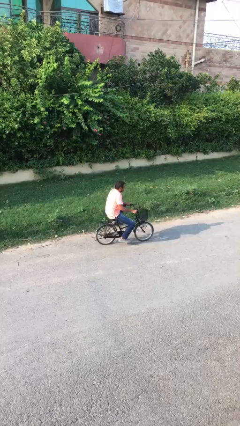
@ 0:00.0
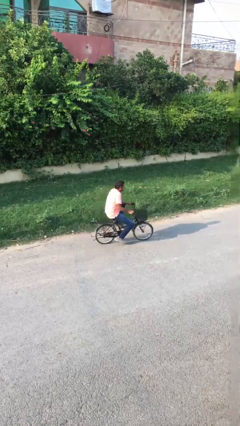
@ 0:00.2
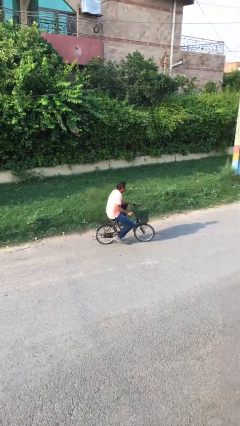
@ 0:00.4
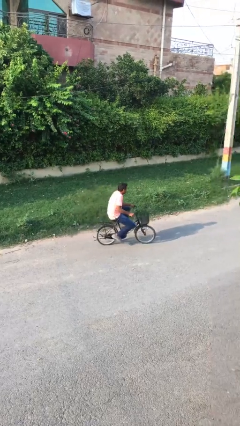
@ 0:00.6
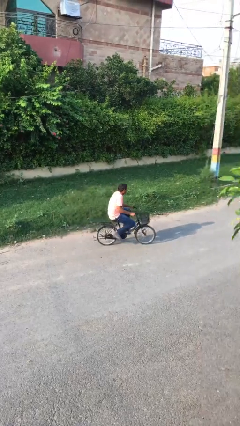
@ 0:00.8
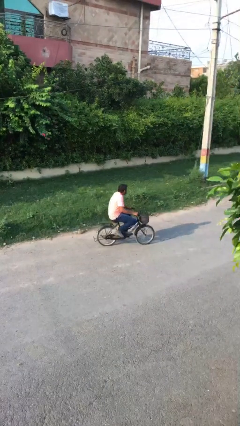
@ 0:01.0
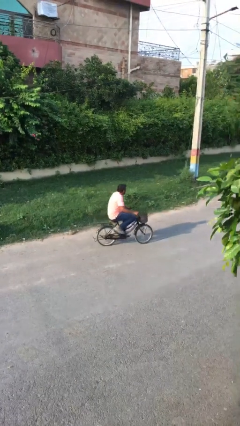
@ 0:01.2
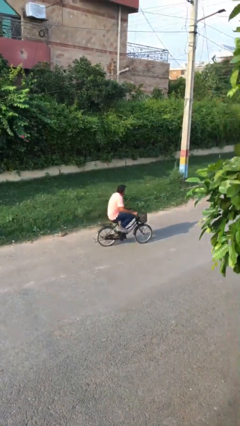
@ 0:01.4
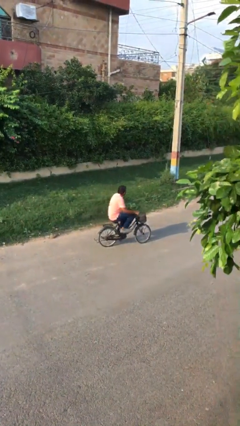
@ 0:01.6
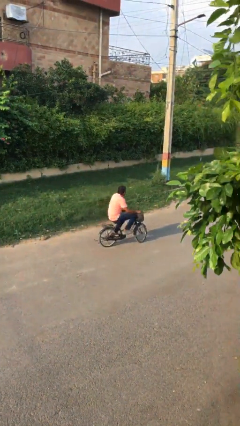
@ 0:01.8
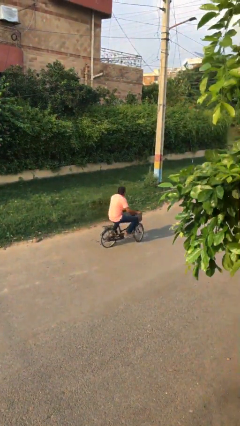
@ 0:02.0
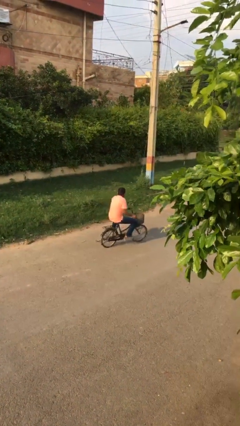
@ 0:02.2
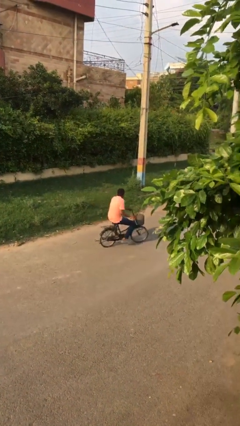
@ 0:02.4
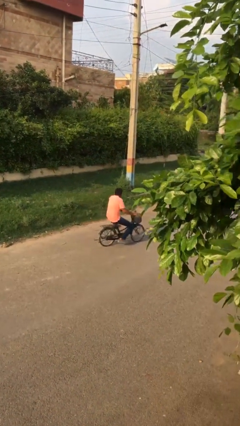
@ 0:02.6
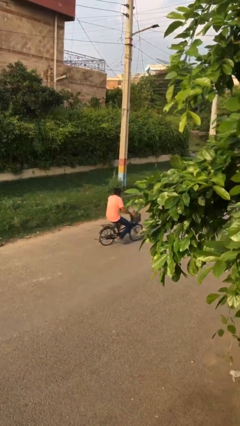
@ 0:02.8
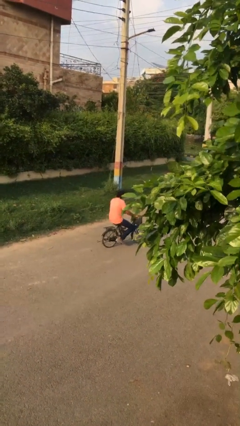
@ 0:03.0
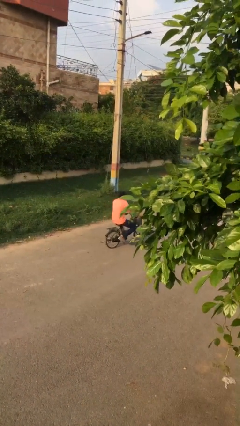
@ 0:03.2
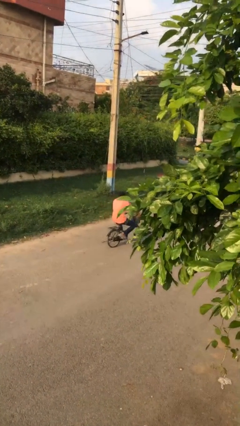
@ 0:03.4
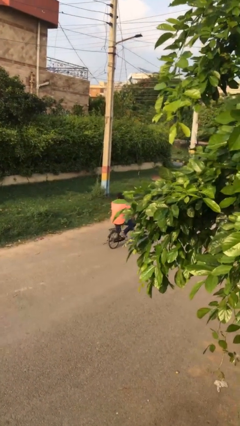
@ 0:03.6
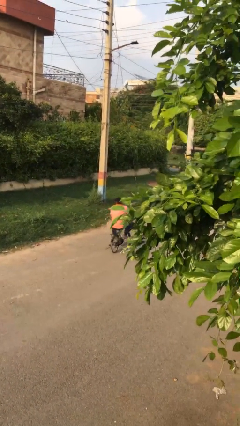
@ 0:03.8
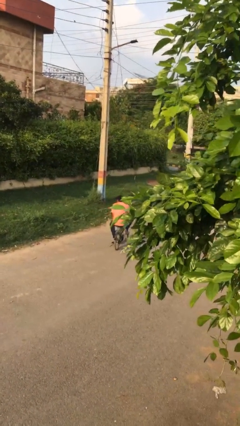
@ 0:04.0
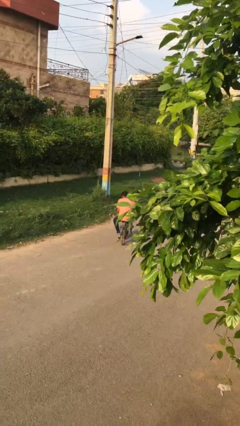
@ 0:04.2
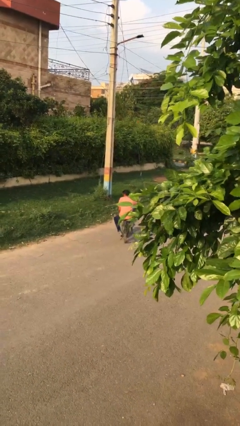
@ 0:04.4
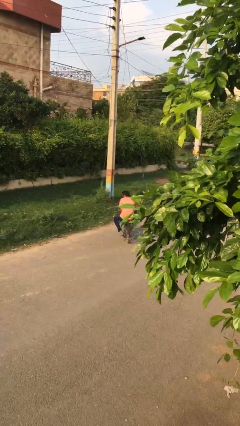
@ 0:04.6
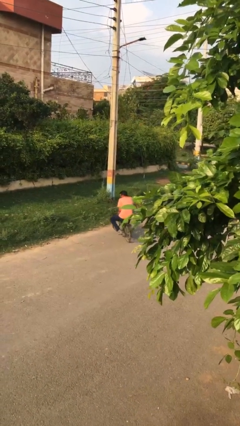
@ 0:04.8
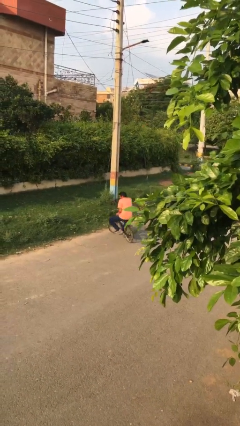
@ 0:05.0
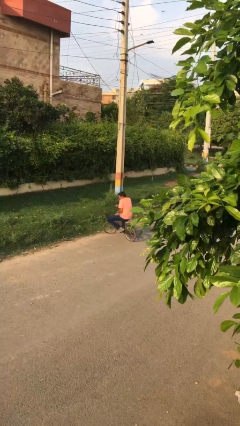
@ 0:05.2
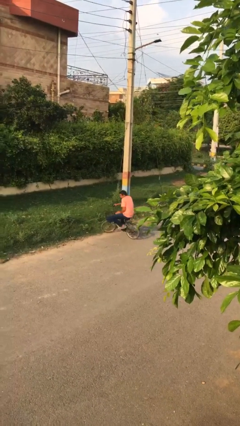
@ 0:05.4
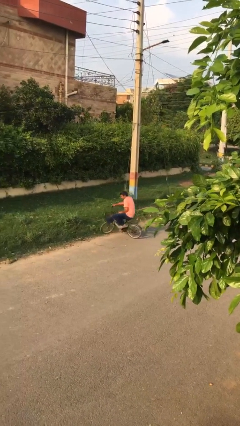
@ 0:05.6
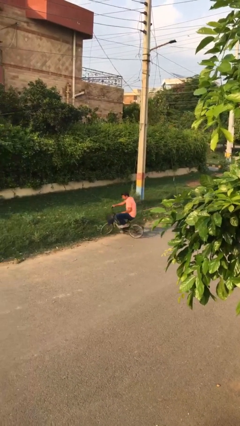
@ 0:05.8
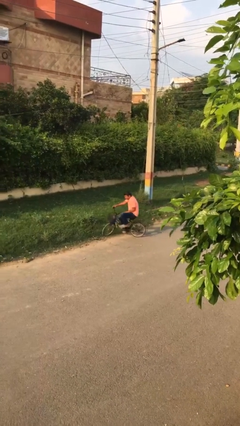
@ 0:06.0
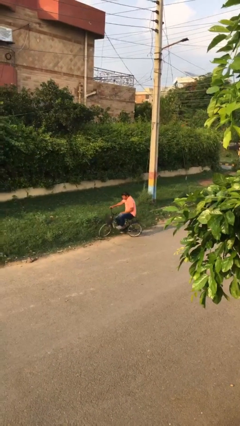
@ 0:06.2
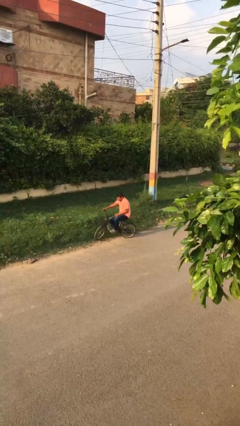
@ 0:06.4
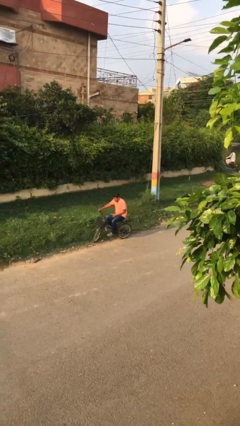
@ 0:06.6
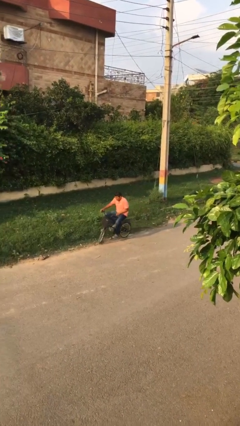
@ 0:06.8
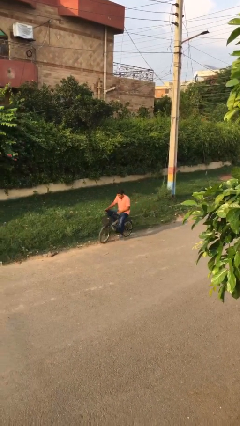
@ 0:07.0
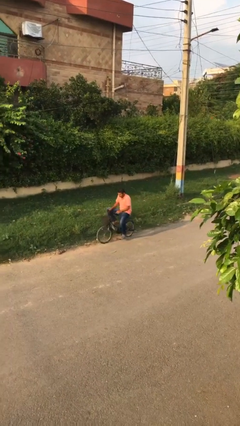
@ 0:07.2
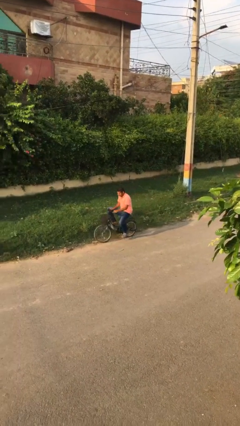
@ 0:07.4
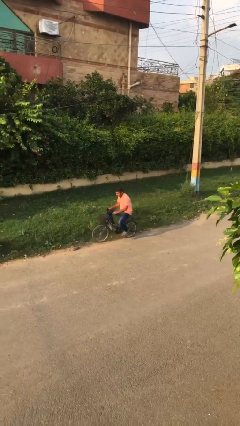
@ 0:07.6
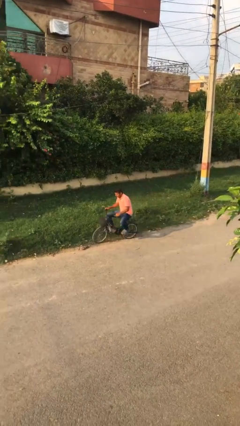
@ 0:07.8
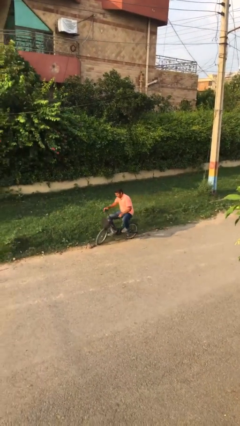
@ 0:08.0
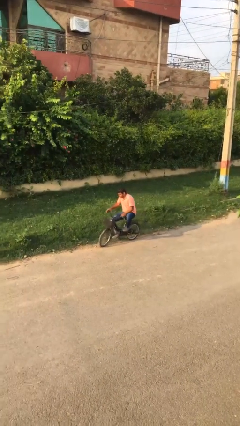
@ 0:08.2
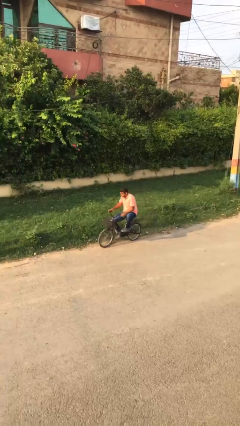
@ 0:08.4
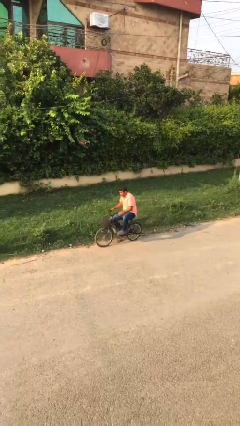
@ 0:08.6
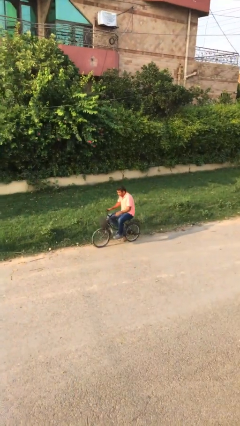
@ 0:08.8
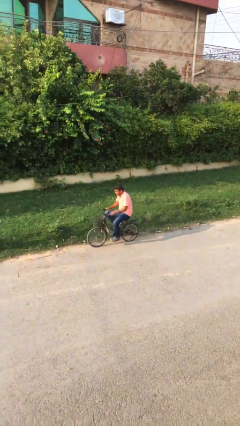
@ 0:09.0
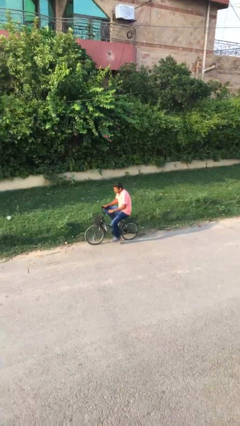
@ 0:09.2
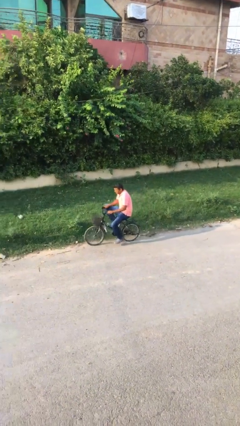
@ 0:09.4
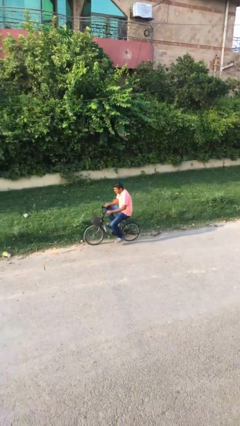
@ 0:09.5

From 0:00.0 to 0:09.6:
person rides bicycle

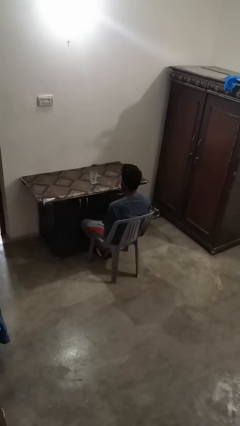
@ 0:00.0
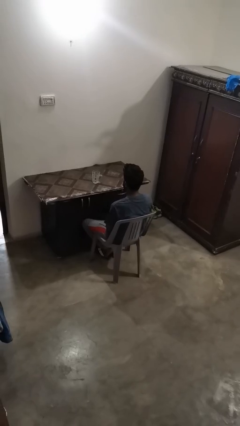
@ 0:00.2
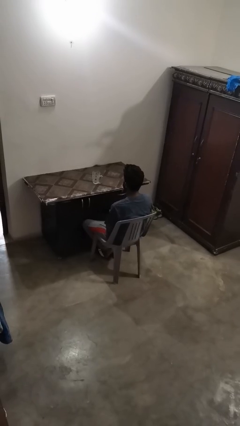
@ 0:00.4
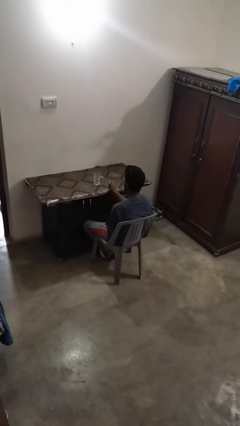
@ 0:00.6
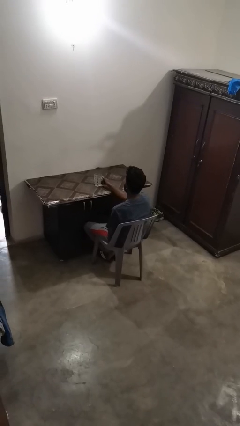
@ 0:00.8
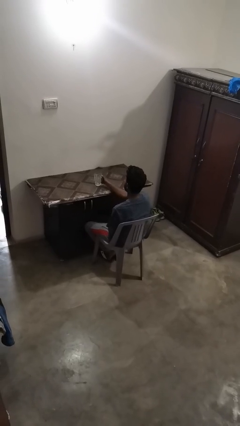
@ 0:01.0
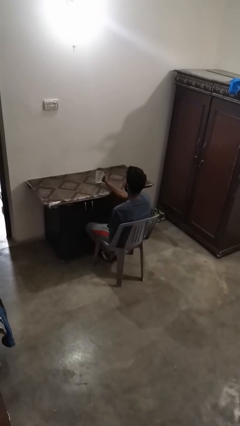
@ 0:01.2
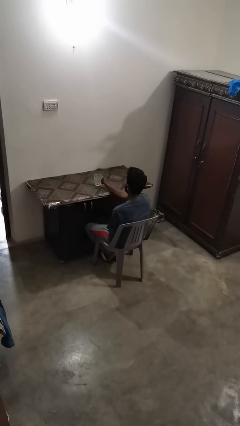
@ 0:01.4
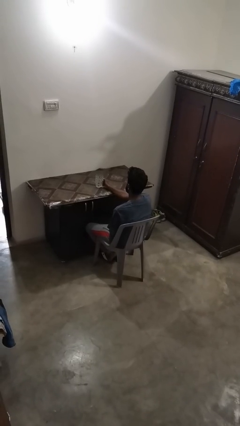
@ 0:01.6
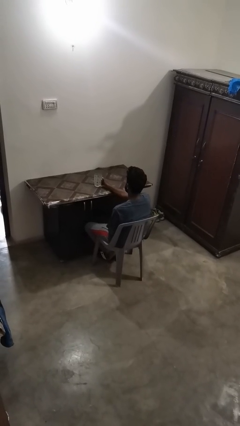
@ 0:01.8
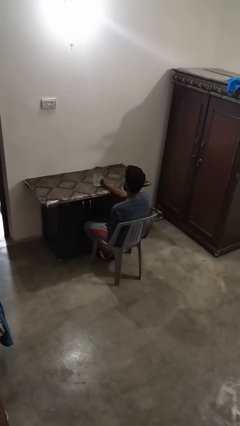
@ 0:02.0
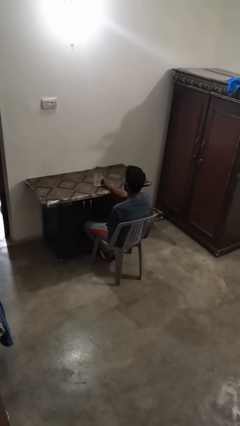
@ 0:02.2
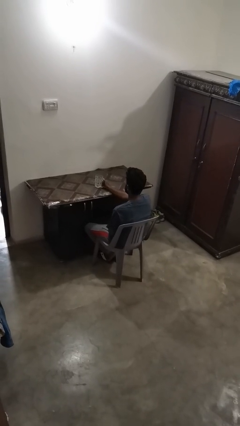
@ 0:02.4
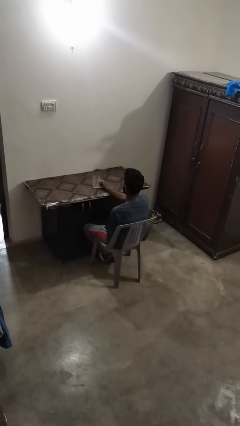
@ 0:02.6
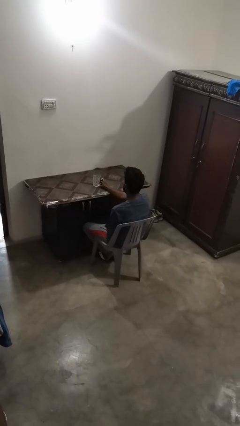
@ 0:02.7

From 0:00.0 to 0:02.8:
person knocks over glass

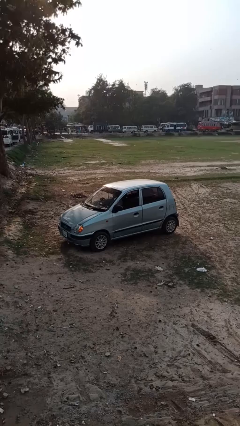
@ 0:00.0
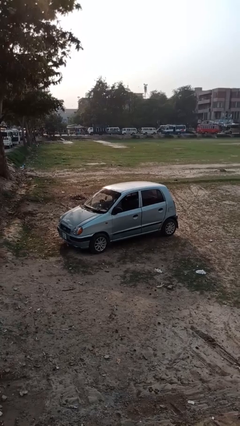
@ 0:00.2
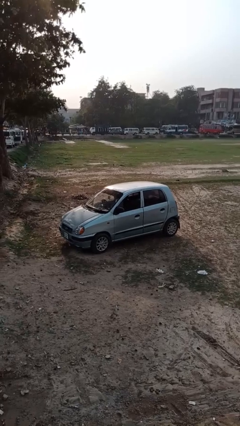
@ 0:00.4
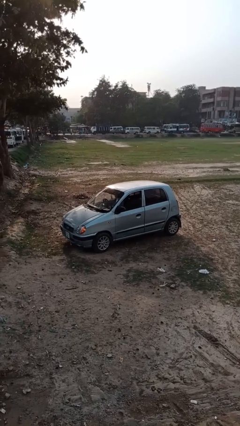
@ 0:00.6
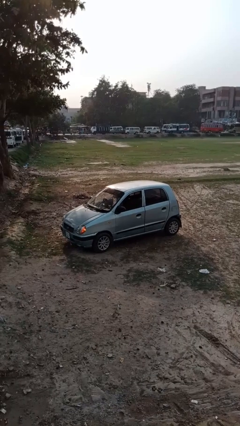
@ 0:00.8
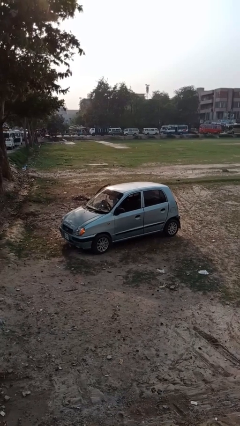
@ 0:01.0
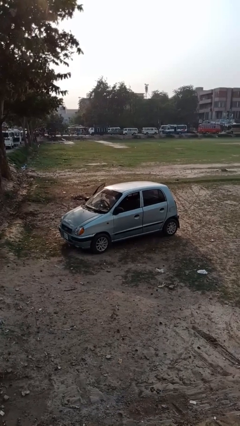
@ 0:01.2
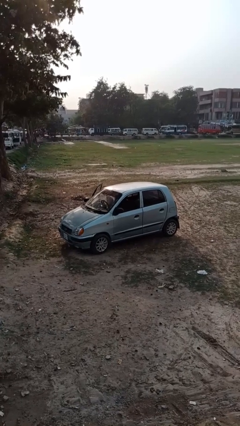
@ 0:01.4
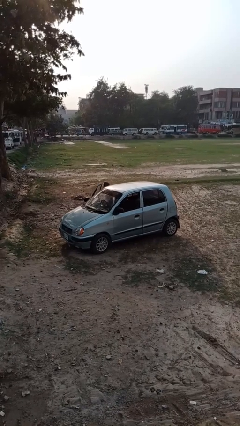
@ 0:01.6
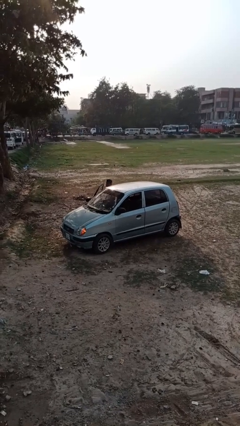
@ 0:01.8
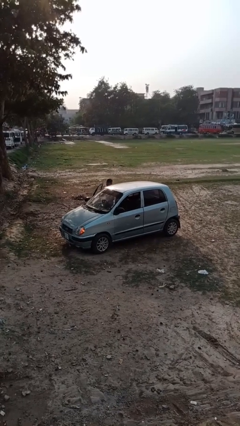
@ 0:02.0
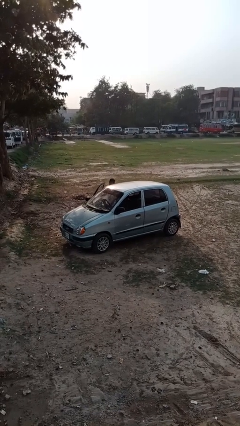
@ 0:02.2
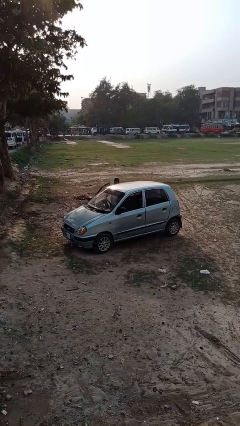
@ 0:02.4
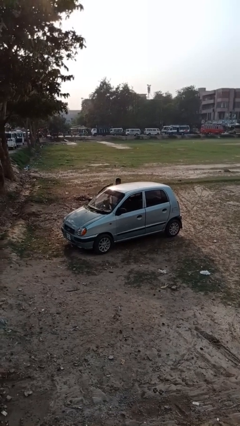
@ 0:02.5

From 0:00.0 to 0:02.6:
car drops off person

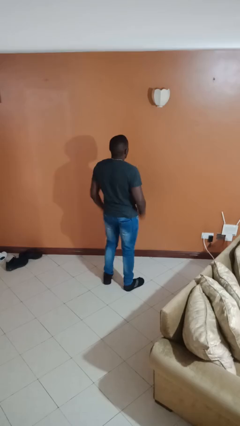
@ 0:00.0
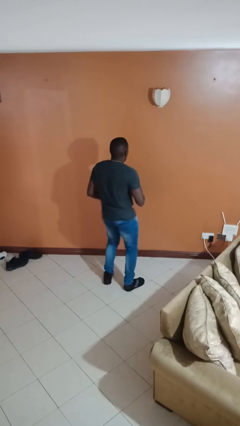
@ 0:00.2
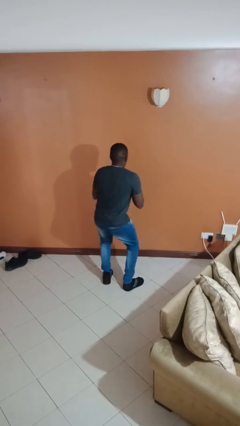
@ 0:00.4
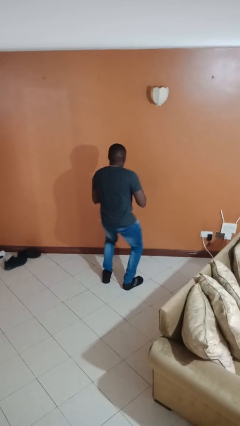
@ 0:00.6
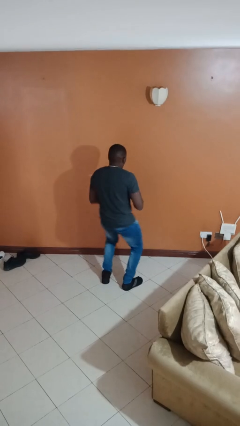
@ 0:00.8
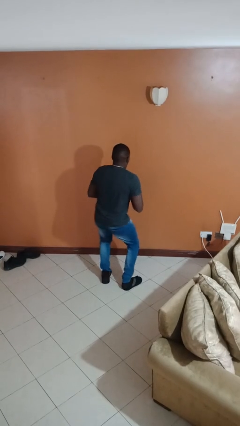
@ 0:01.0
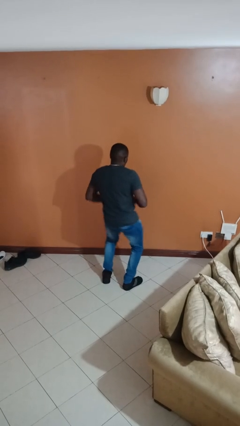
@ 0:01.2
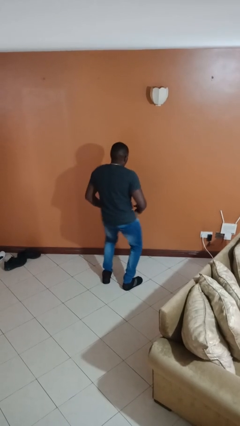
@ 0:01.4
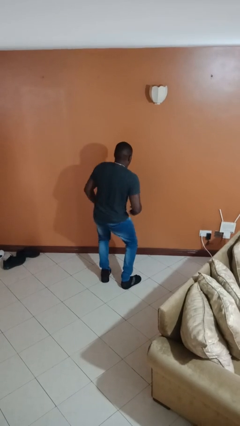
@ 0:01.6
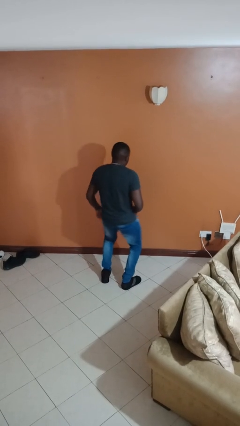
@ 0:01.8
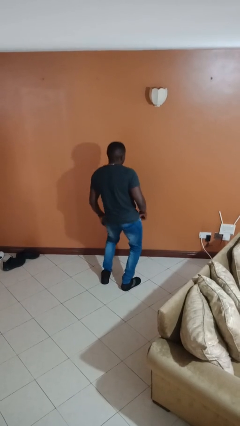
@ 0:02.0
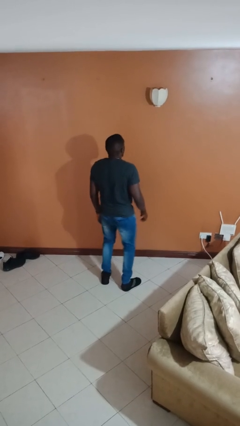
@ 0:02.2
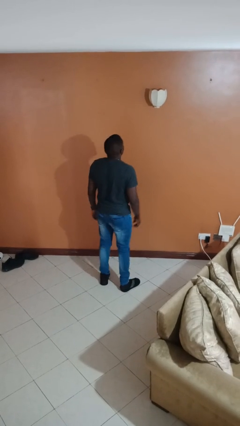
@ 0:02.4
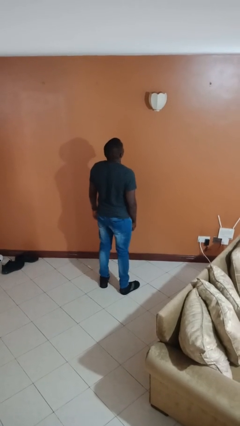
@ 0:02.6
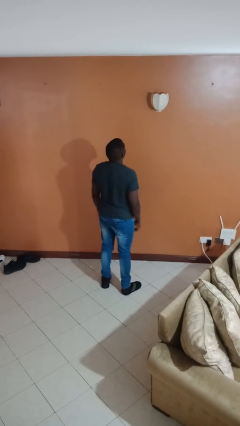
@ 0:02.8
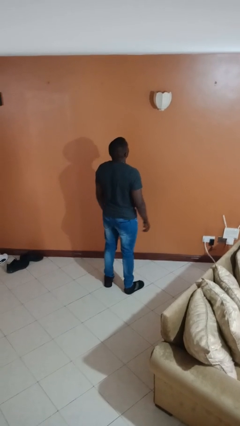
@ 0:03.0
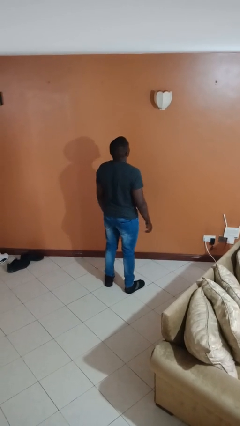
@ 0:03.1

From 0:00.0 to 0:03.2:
person wiggles hips
